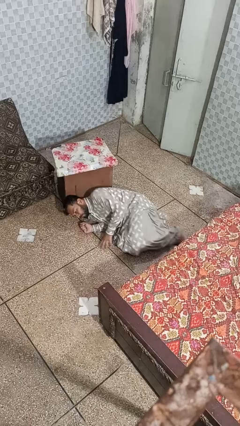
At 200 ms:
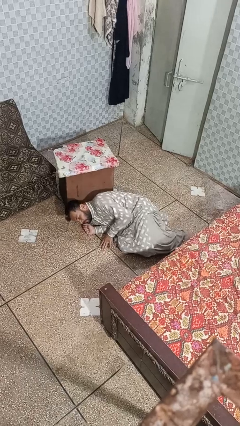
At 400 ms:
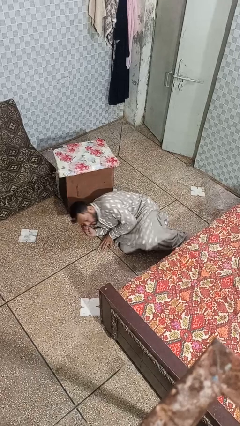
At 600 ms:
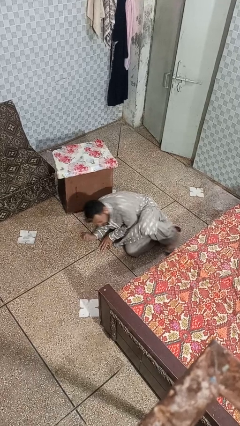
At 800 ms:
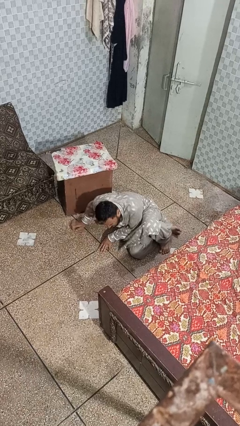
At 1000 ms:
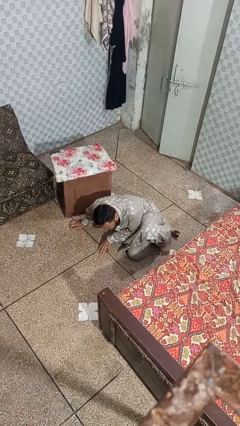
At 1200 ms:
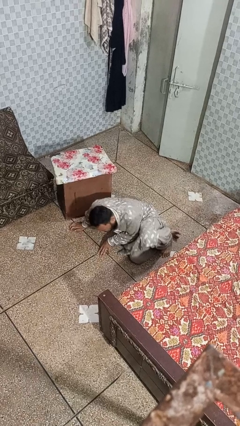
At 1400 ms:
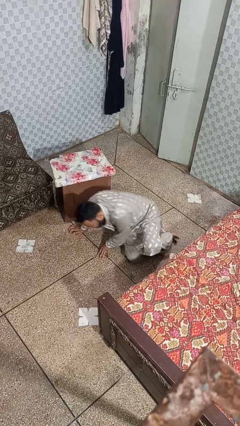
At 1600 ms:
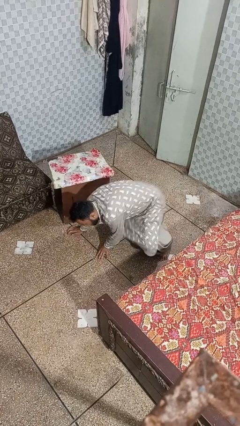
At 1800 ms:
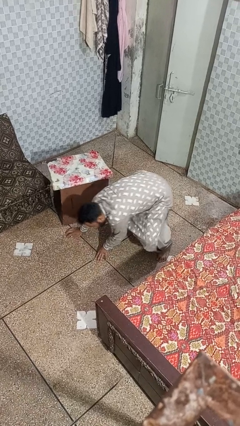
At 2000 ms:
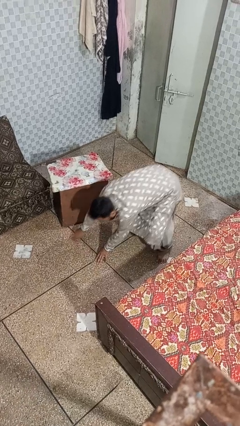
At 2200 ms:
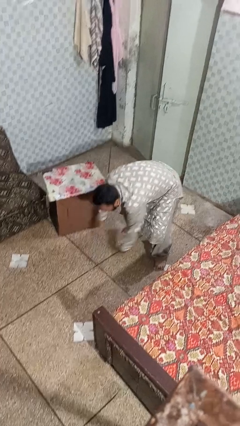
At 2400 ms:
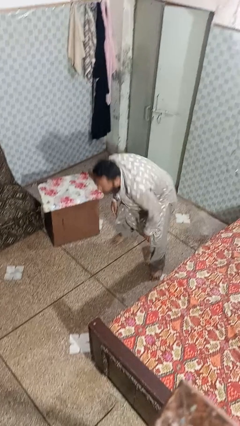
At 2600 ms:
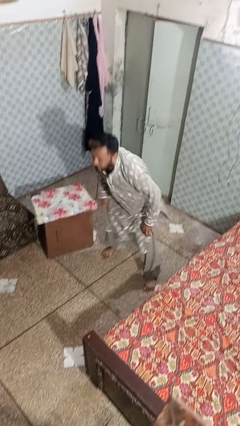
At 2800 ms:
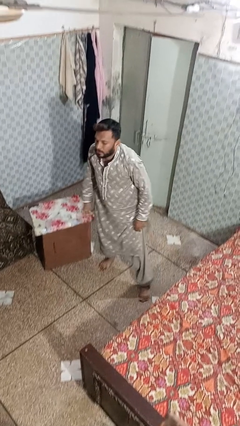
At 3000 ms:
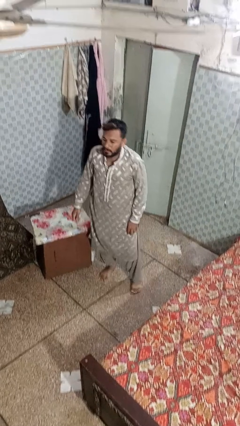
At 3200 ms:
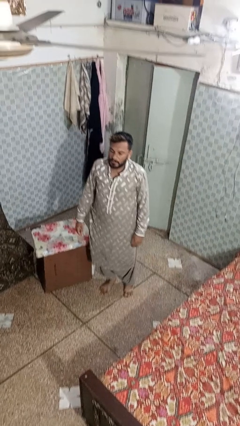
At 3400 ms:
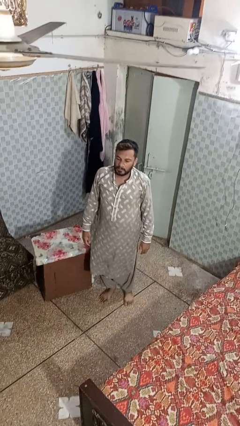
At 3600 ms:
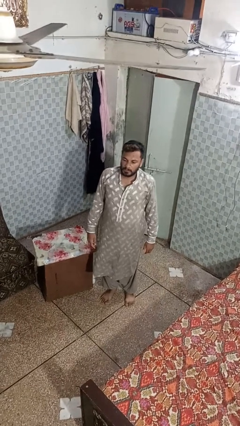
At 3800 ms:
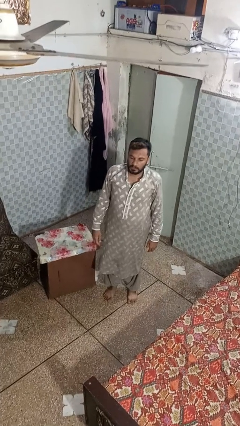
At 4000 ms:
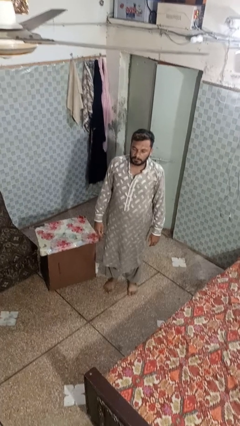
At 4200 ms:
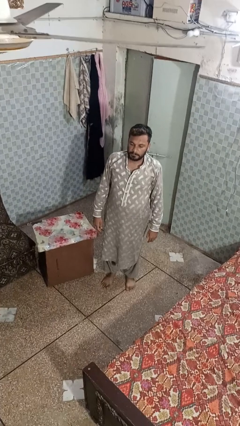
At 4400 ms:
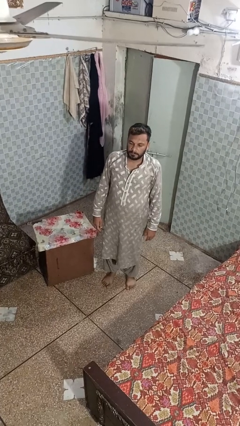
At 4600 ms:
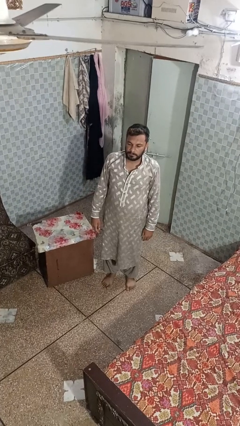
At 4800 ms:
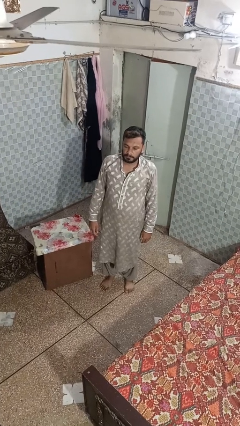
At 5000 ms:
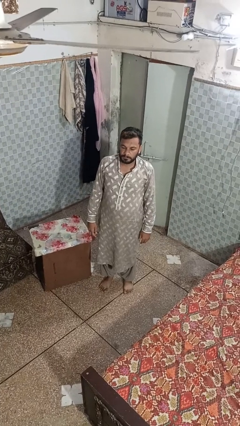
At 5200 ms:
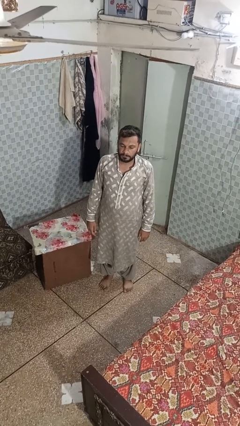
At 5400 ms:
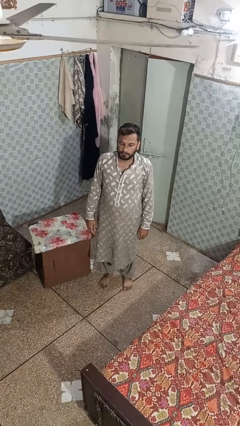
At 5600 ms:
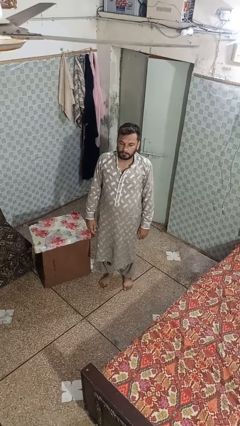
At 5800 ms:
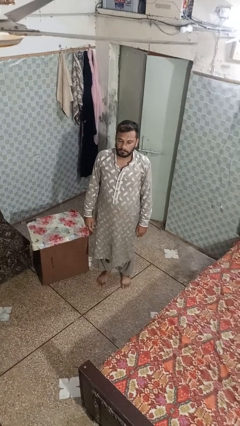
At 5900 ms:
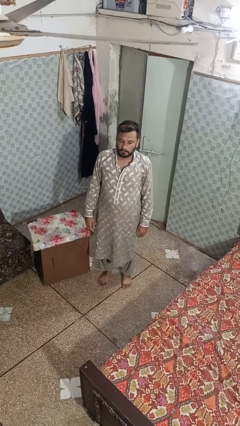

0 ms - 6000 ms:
person stands up from floor

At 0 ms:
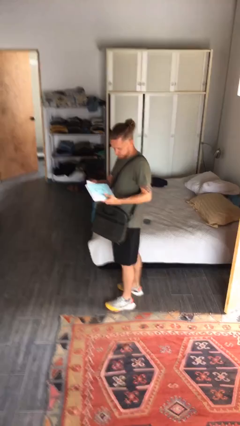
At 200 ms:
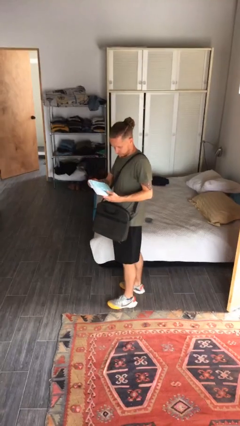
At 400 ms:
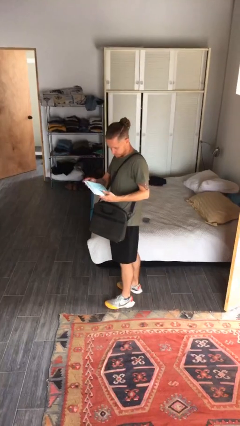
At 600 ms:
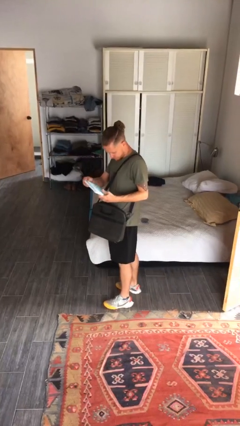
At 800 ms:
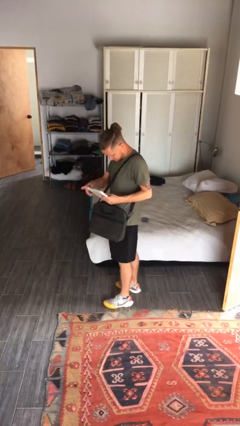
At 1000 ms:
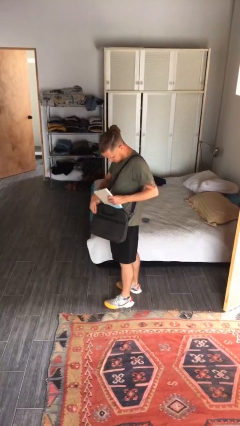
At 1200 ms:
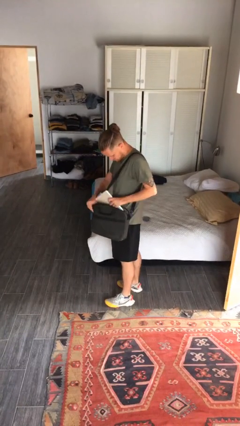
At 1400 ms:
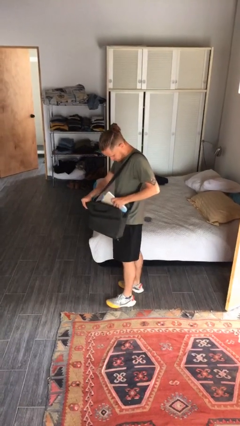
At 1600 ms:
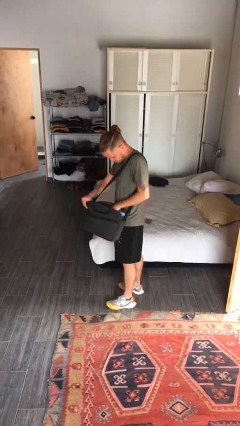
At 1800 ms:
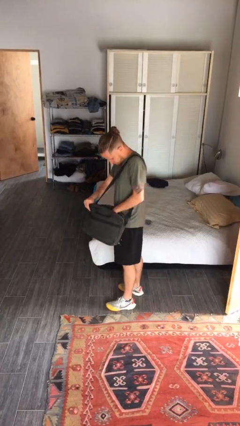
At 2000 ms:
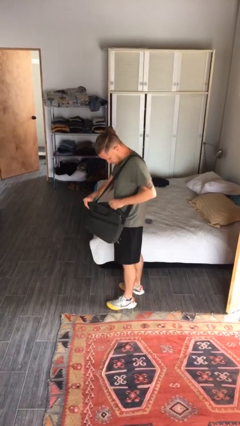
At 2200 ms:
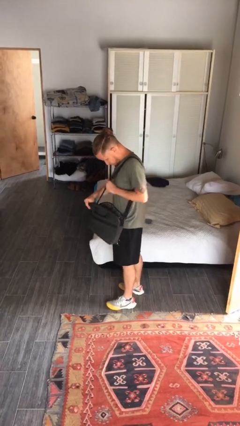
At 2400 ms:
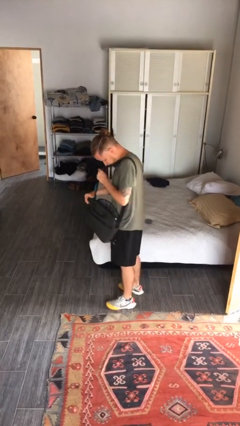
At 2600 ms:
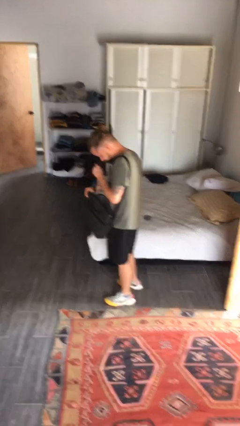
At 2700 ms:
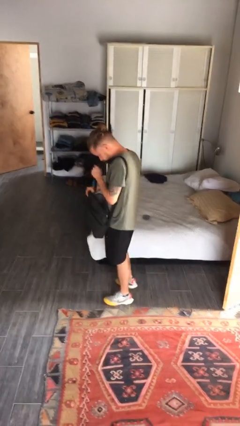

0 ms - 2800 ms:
person puts object into purse

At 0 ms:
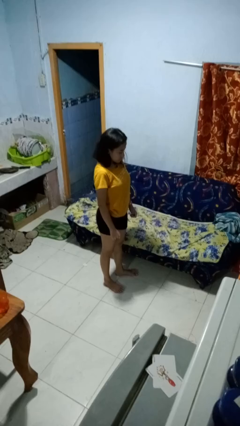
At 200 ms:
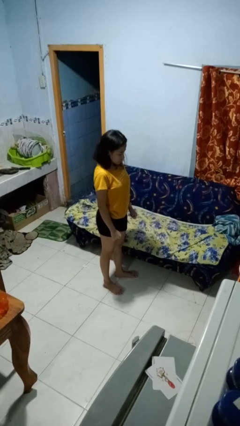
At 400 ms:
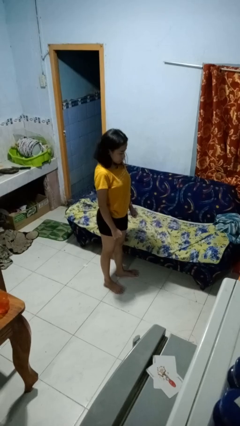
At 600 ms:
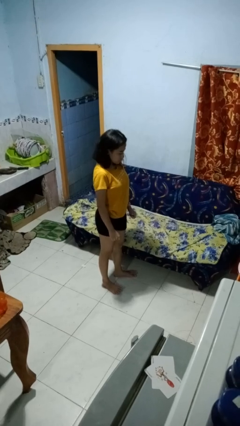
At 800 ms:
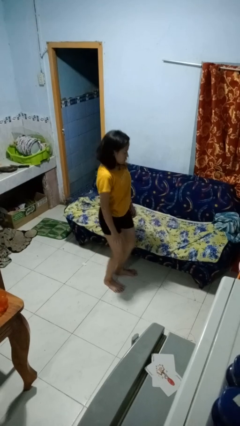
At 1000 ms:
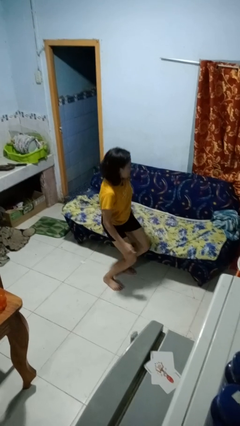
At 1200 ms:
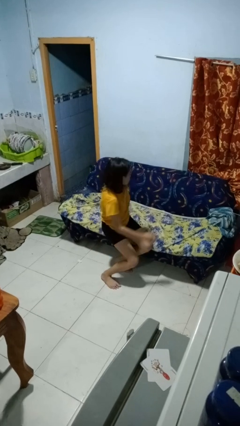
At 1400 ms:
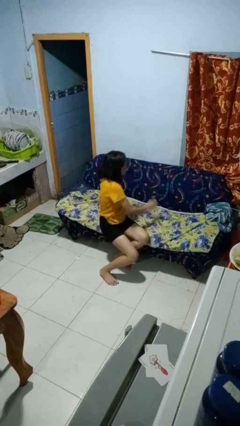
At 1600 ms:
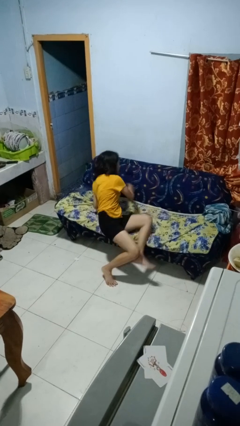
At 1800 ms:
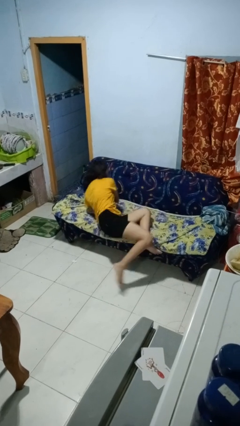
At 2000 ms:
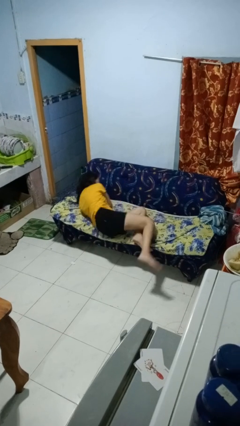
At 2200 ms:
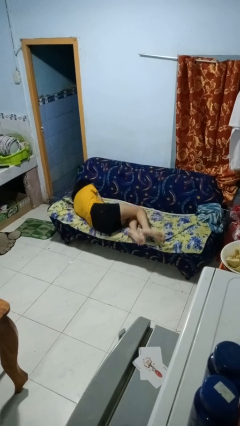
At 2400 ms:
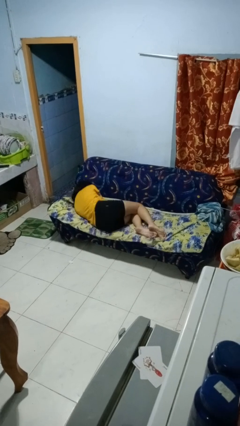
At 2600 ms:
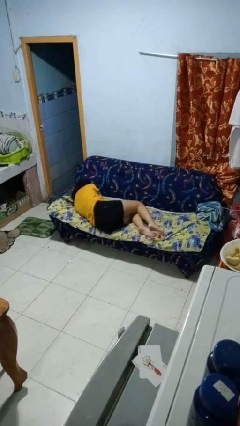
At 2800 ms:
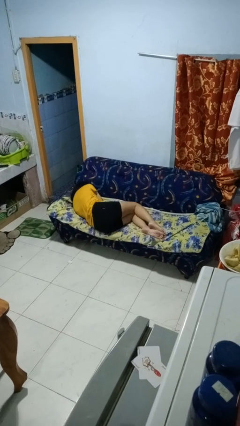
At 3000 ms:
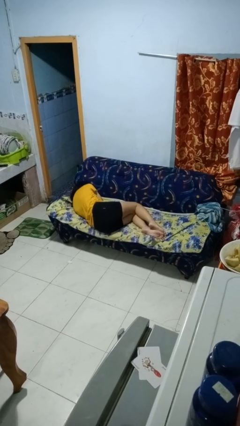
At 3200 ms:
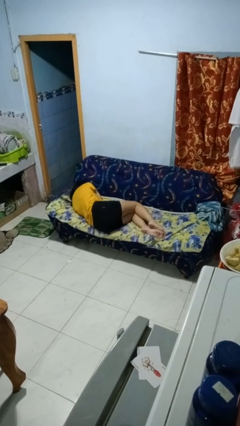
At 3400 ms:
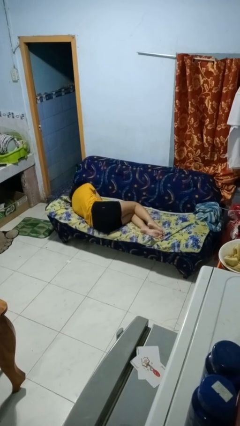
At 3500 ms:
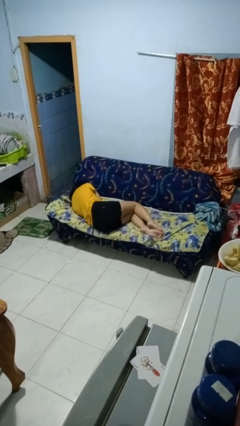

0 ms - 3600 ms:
person lies down on couch

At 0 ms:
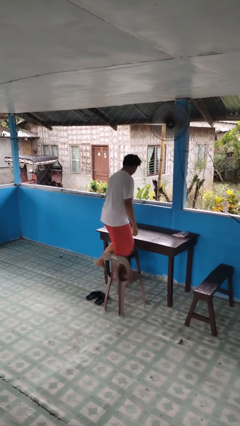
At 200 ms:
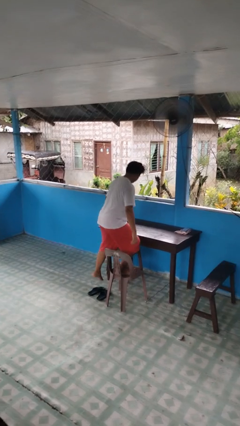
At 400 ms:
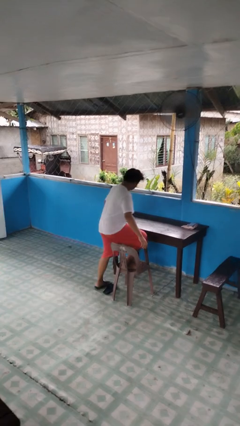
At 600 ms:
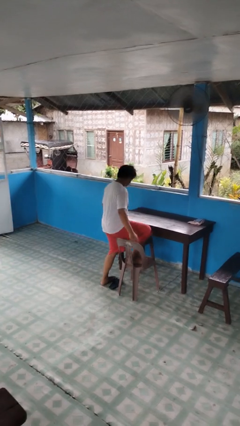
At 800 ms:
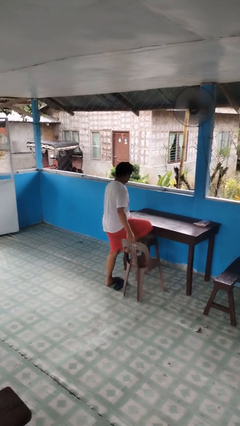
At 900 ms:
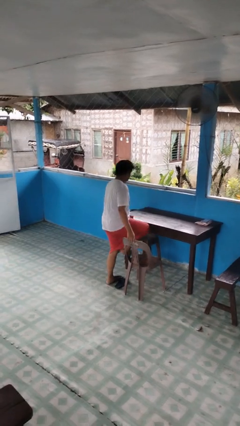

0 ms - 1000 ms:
person climbs off chair

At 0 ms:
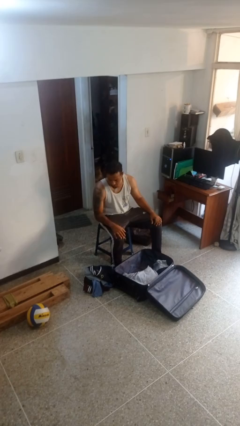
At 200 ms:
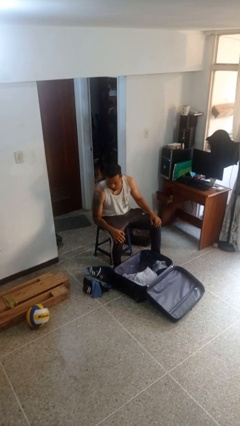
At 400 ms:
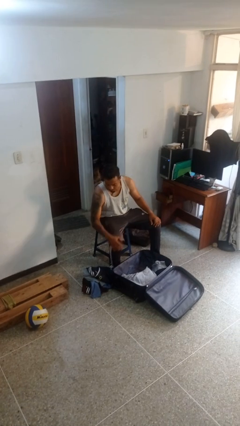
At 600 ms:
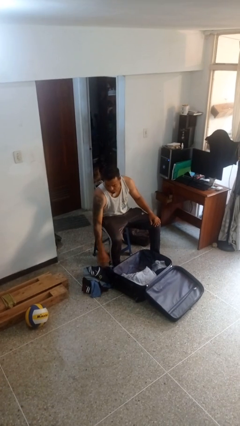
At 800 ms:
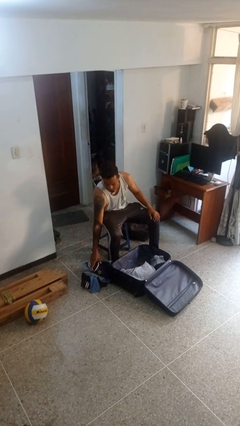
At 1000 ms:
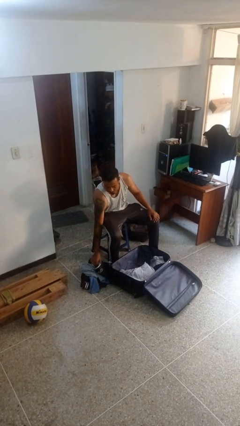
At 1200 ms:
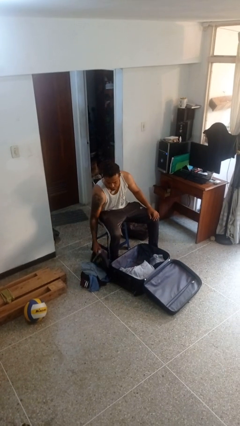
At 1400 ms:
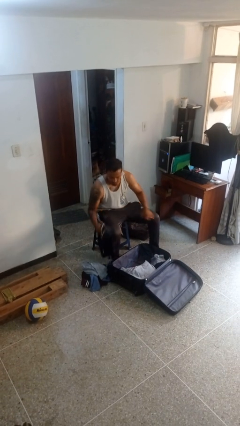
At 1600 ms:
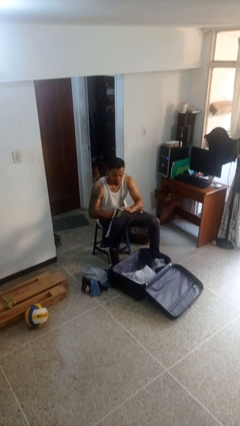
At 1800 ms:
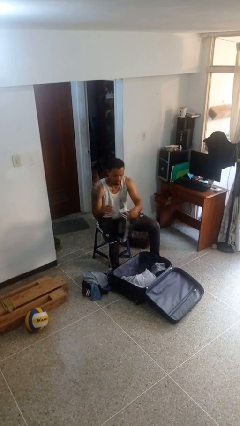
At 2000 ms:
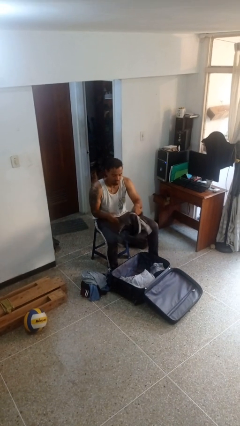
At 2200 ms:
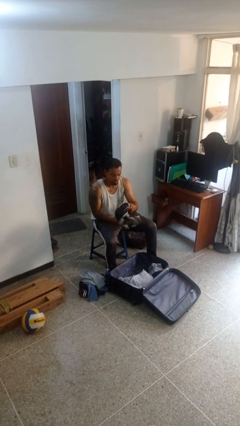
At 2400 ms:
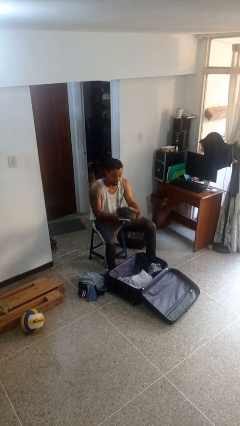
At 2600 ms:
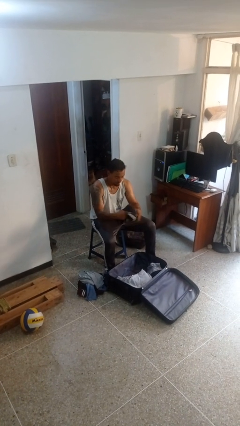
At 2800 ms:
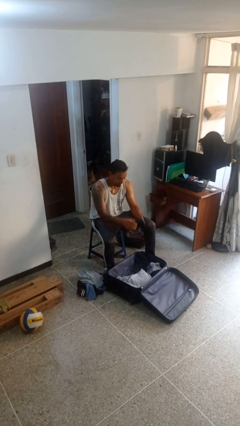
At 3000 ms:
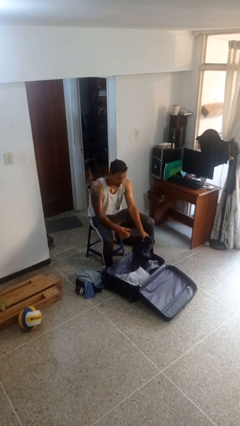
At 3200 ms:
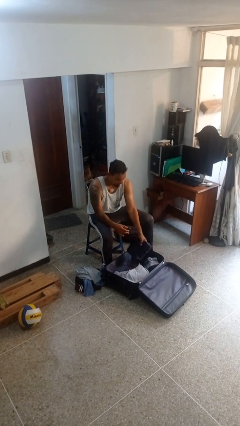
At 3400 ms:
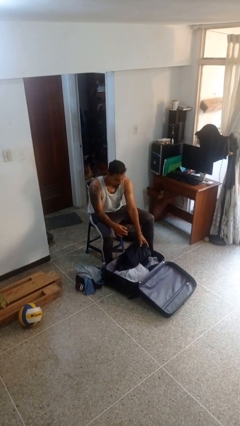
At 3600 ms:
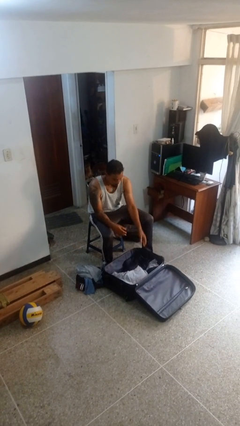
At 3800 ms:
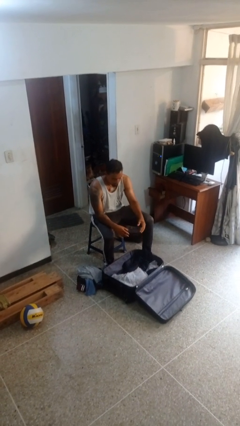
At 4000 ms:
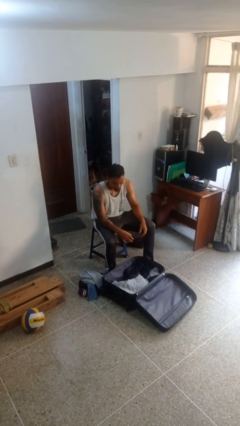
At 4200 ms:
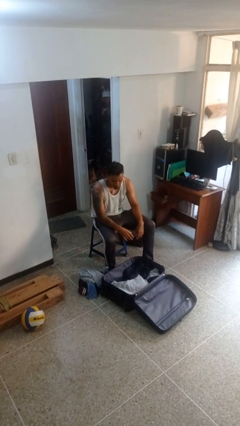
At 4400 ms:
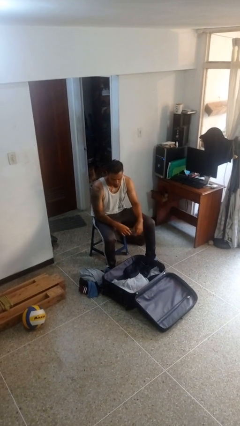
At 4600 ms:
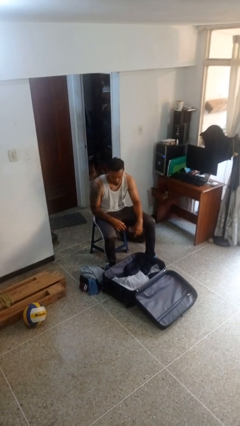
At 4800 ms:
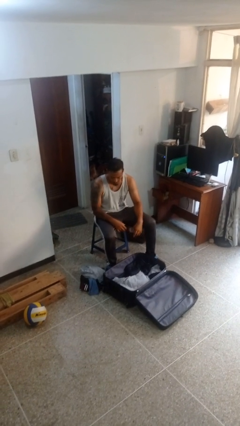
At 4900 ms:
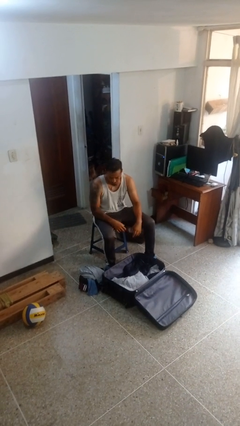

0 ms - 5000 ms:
person loads clothes into suitcase
